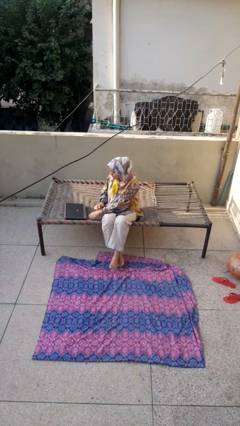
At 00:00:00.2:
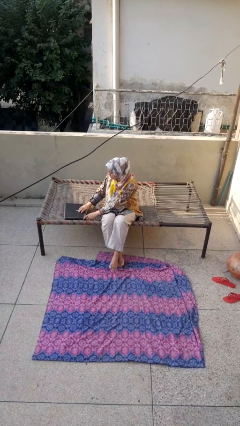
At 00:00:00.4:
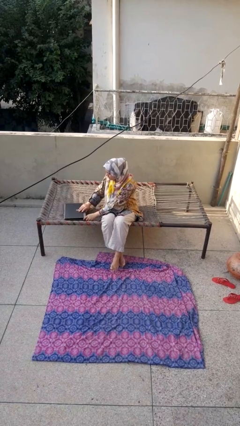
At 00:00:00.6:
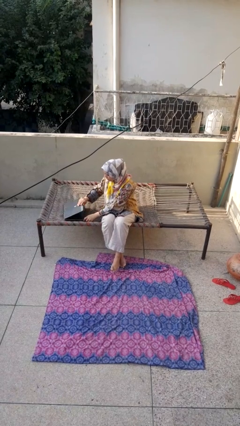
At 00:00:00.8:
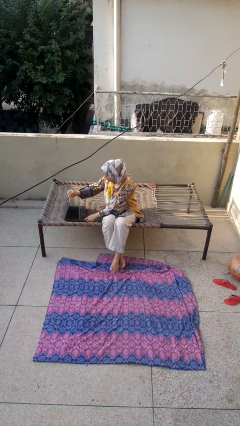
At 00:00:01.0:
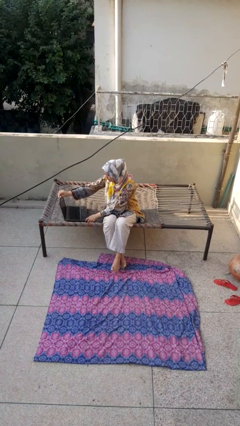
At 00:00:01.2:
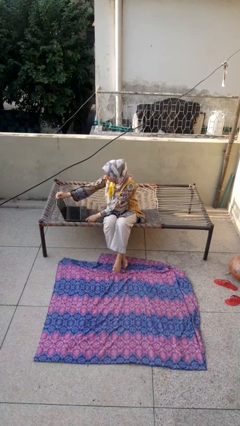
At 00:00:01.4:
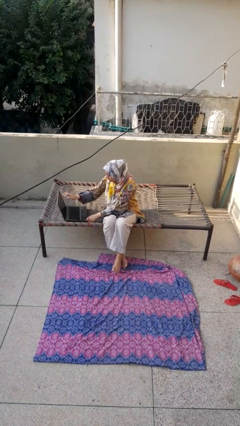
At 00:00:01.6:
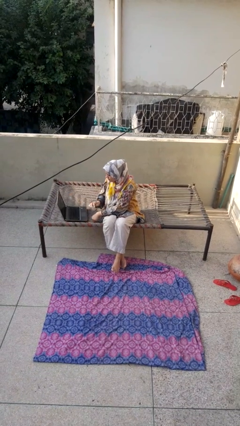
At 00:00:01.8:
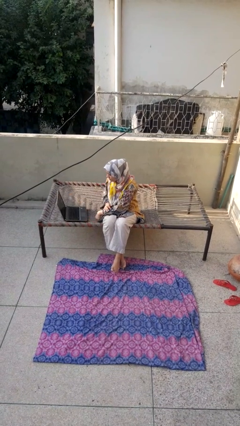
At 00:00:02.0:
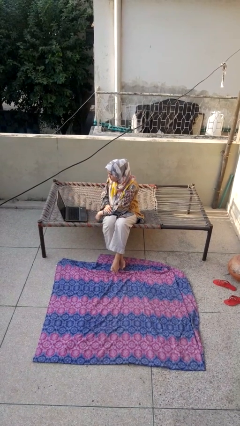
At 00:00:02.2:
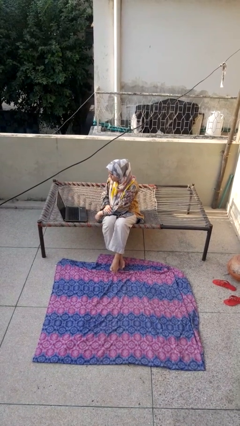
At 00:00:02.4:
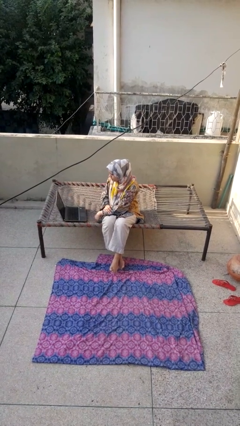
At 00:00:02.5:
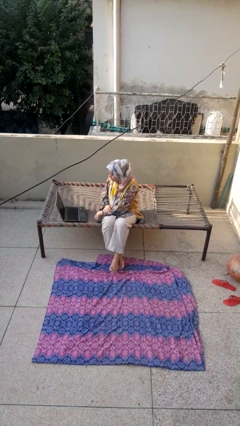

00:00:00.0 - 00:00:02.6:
person opens laptop

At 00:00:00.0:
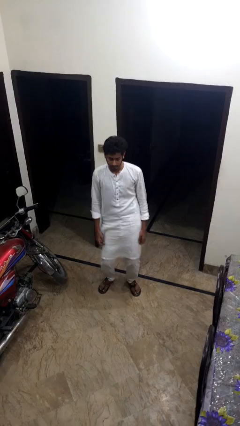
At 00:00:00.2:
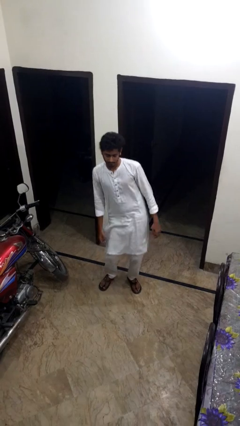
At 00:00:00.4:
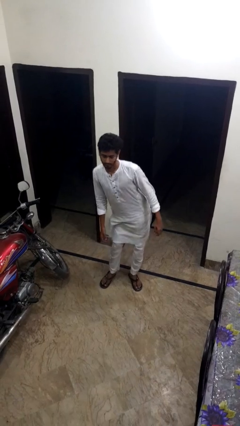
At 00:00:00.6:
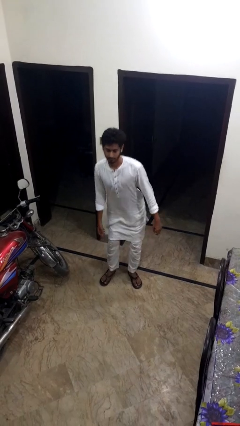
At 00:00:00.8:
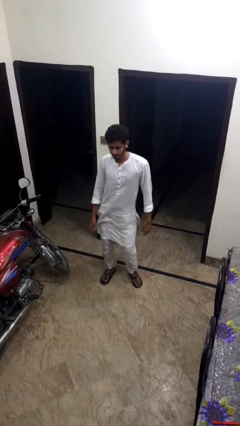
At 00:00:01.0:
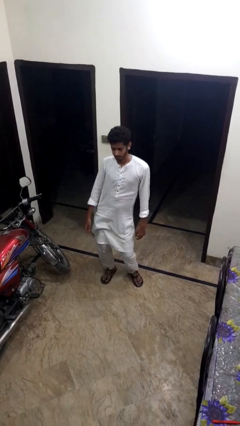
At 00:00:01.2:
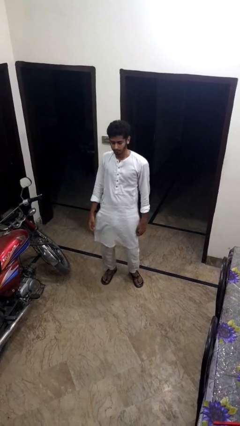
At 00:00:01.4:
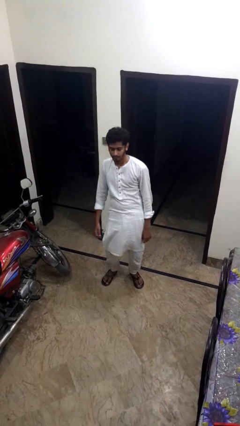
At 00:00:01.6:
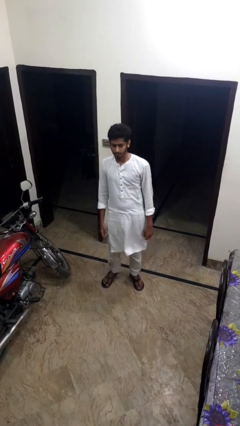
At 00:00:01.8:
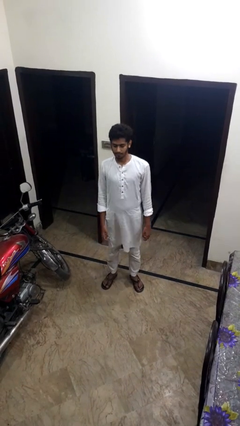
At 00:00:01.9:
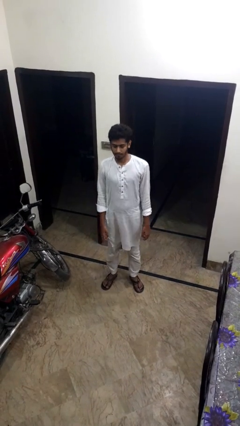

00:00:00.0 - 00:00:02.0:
person wiggles hips

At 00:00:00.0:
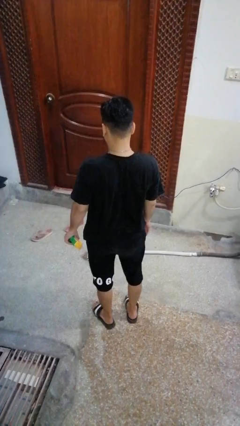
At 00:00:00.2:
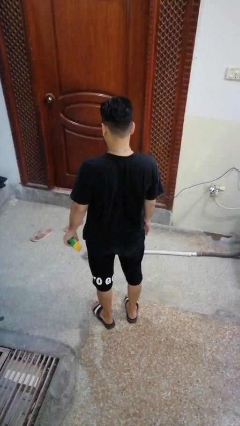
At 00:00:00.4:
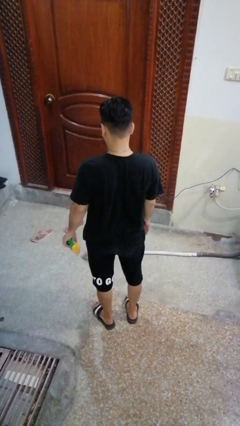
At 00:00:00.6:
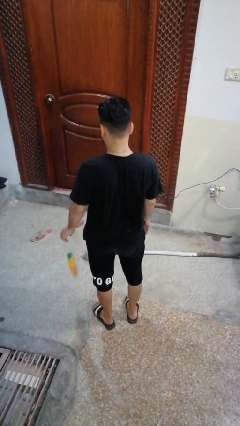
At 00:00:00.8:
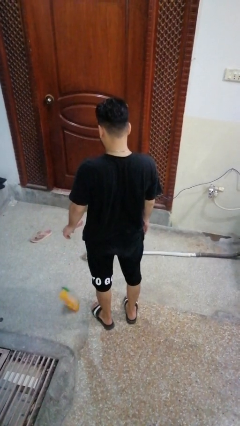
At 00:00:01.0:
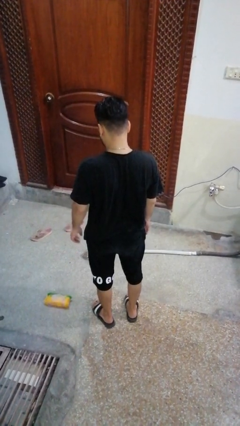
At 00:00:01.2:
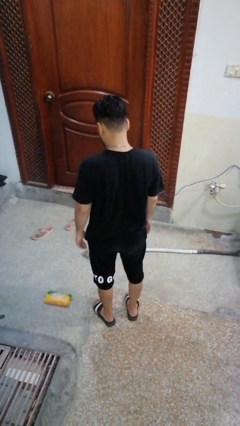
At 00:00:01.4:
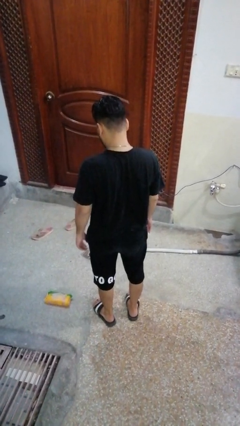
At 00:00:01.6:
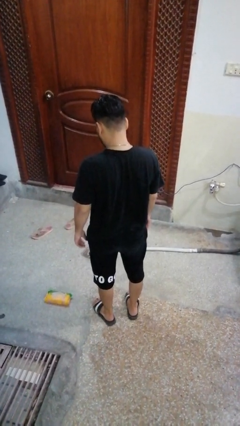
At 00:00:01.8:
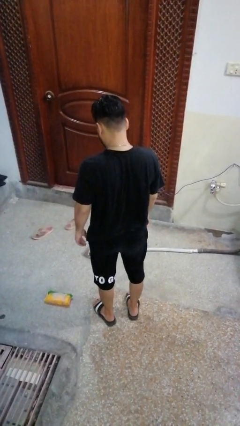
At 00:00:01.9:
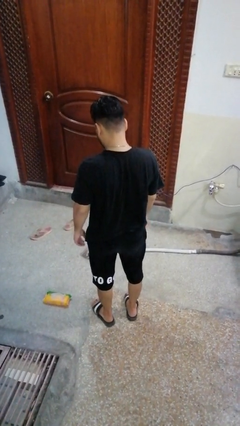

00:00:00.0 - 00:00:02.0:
person drops object

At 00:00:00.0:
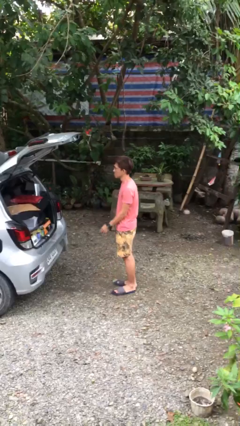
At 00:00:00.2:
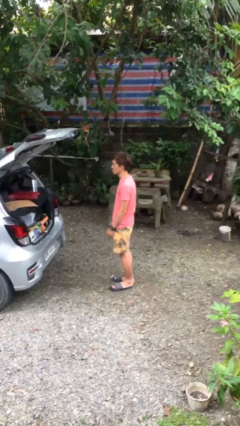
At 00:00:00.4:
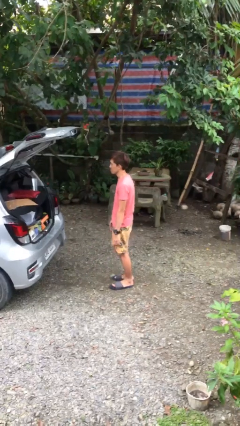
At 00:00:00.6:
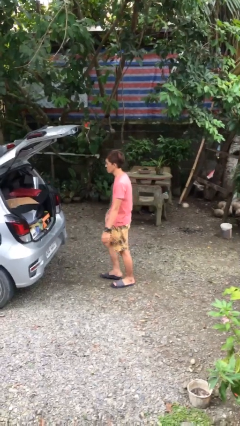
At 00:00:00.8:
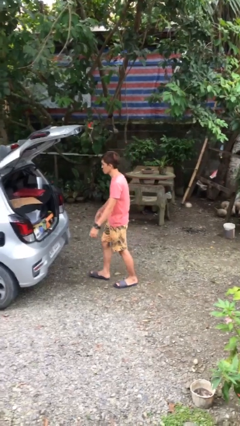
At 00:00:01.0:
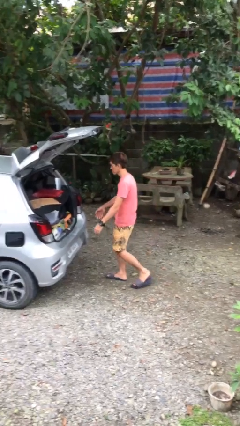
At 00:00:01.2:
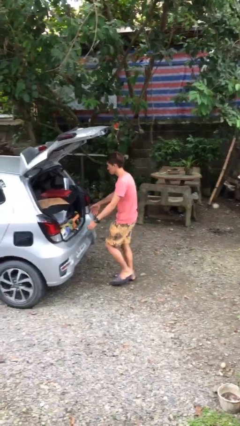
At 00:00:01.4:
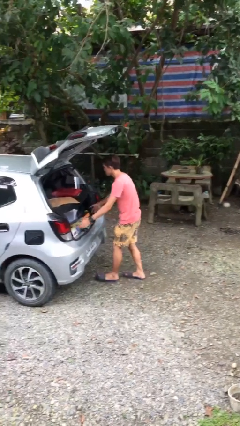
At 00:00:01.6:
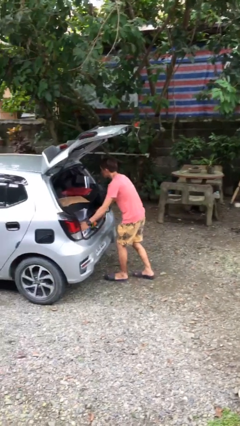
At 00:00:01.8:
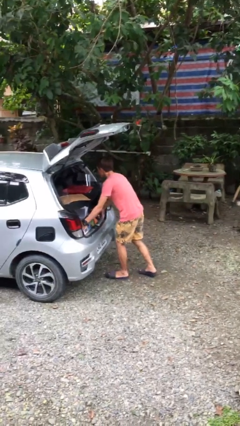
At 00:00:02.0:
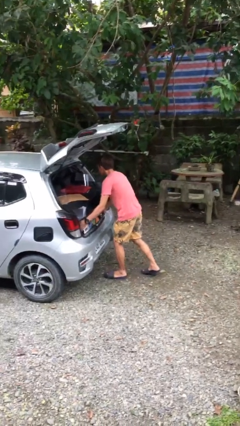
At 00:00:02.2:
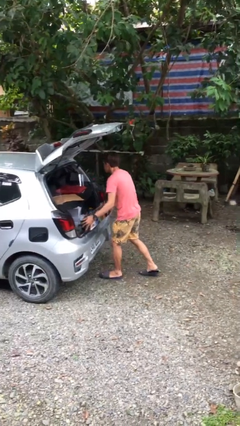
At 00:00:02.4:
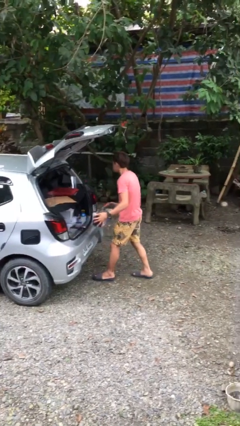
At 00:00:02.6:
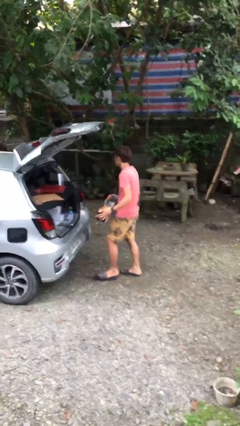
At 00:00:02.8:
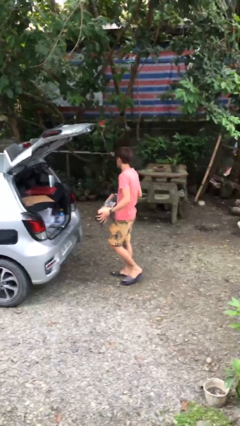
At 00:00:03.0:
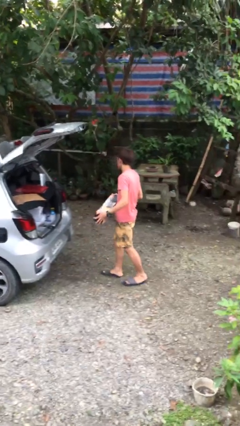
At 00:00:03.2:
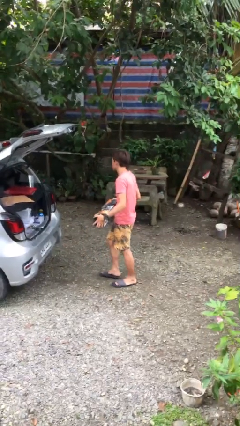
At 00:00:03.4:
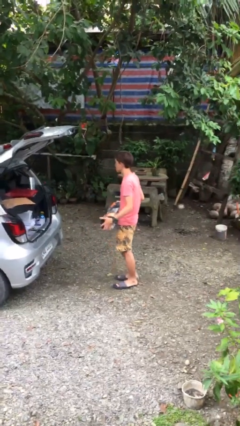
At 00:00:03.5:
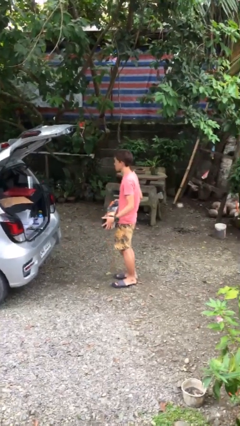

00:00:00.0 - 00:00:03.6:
person unloads car

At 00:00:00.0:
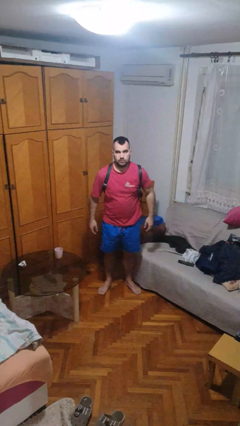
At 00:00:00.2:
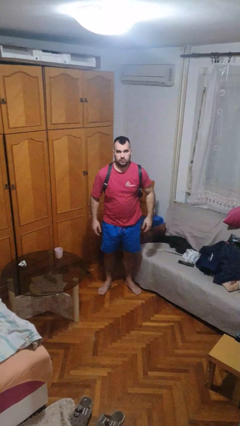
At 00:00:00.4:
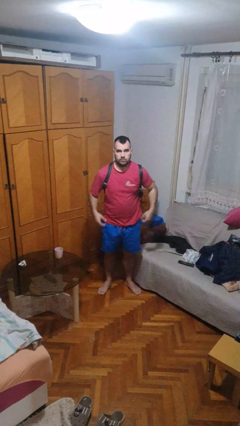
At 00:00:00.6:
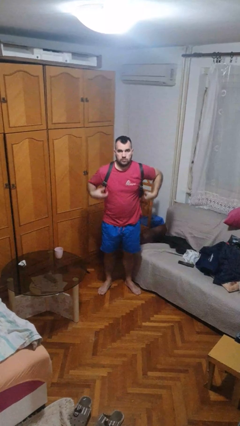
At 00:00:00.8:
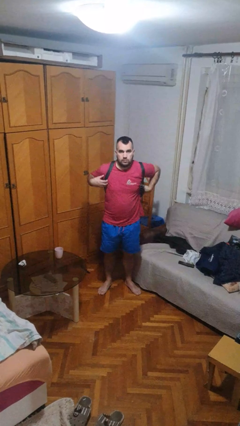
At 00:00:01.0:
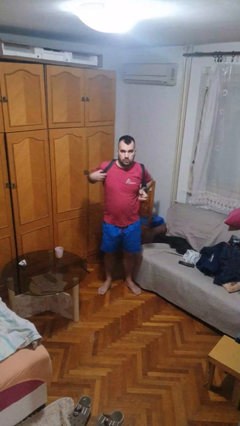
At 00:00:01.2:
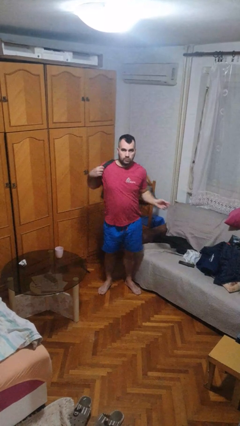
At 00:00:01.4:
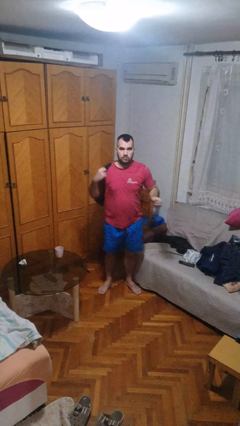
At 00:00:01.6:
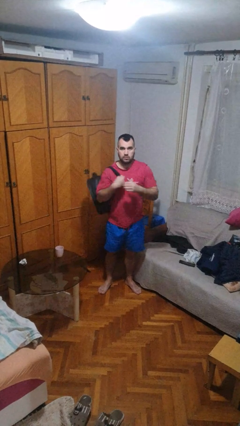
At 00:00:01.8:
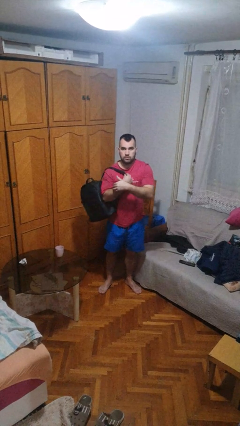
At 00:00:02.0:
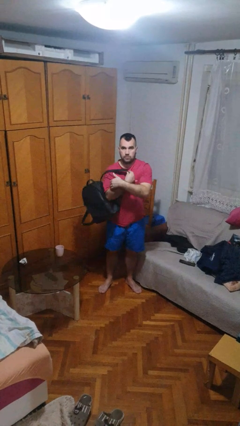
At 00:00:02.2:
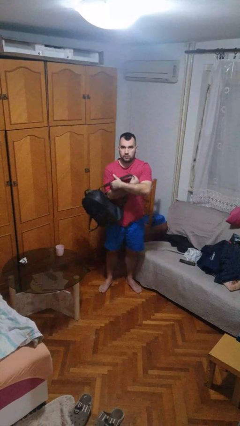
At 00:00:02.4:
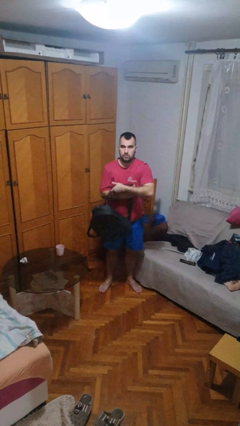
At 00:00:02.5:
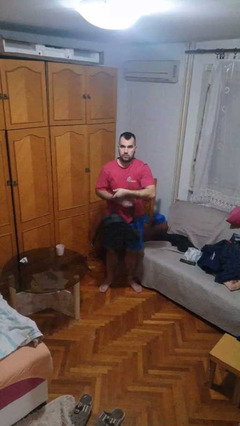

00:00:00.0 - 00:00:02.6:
person takes off backpack

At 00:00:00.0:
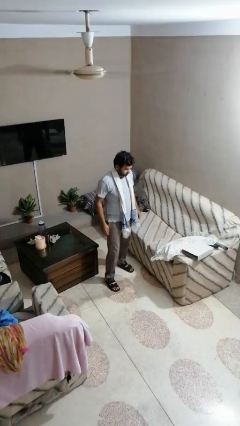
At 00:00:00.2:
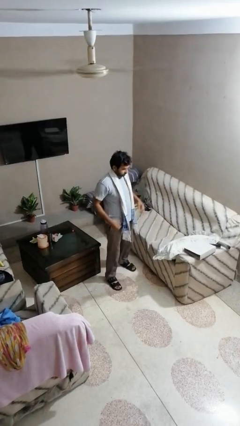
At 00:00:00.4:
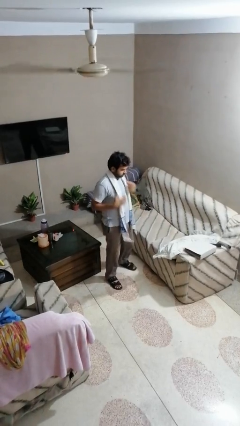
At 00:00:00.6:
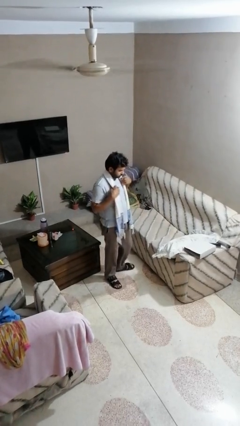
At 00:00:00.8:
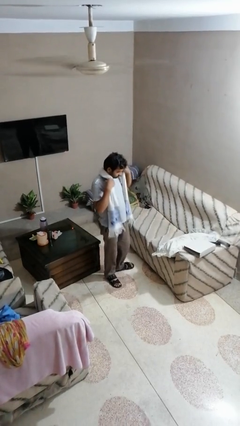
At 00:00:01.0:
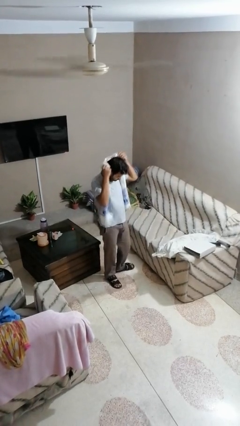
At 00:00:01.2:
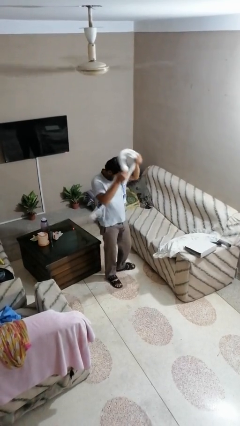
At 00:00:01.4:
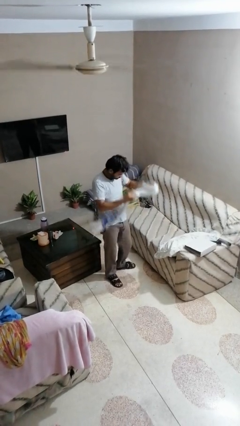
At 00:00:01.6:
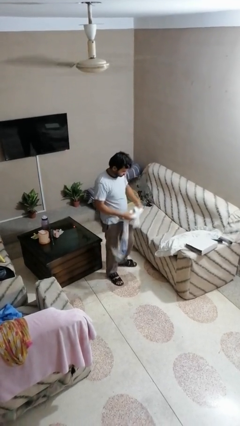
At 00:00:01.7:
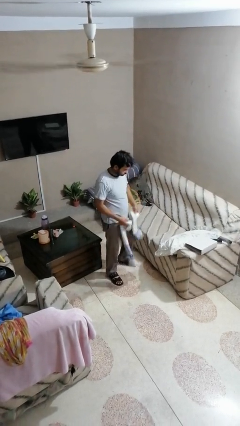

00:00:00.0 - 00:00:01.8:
person takes off scarf

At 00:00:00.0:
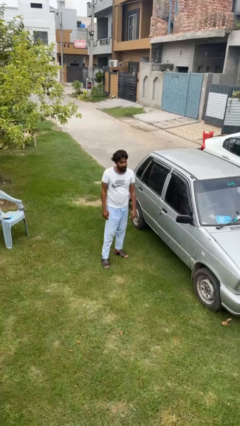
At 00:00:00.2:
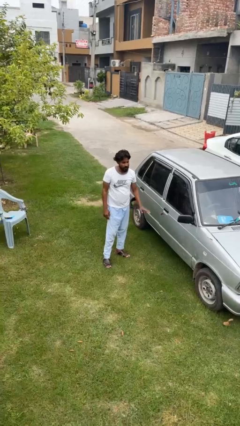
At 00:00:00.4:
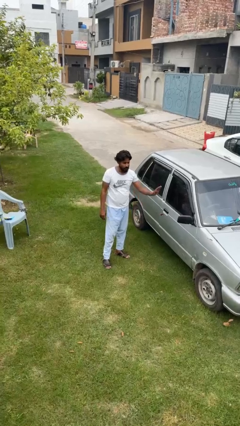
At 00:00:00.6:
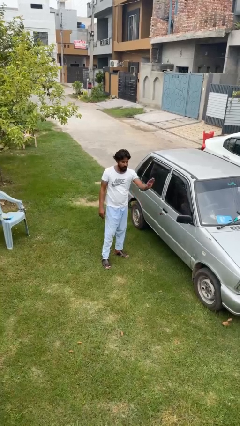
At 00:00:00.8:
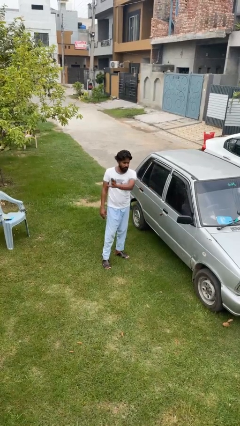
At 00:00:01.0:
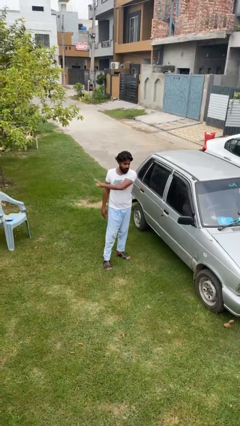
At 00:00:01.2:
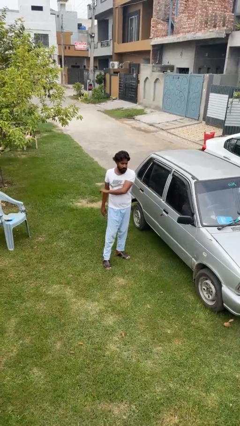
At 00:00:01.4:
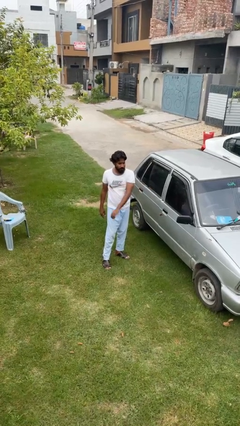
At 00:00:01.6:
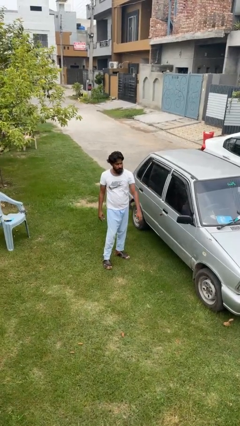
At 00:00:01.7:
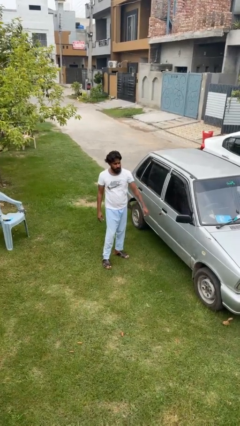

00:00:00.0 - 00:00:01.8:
person gestures swipe right
